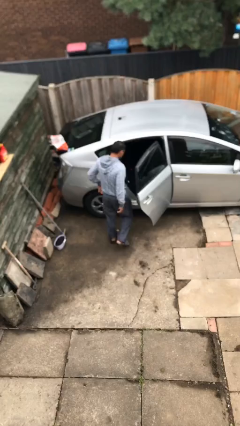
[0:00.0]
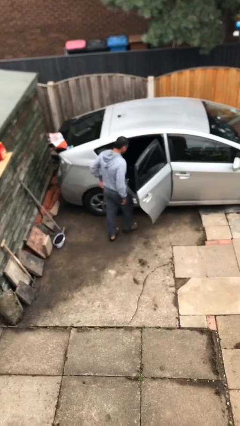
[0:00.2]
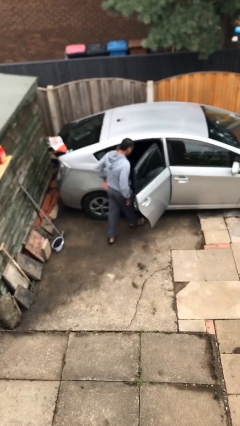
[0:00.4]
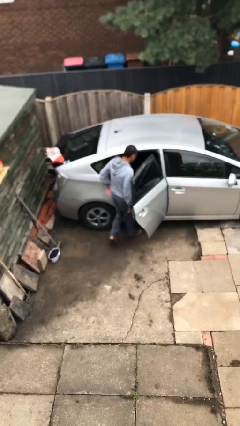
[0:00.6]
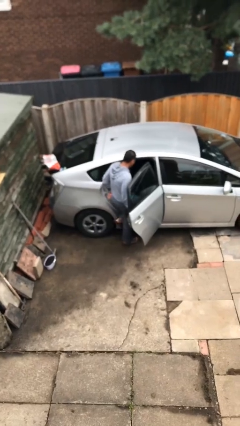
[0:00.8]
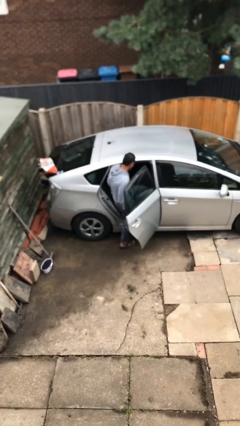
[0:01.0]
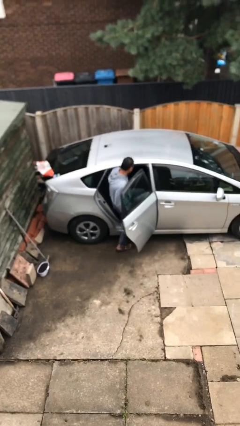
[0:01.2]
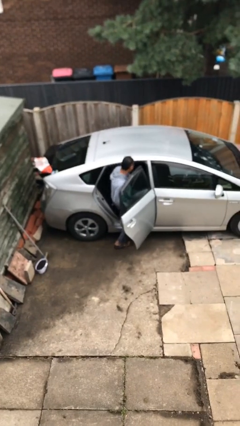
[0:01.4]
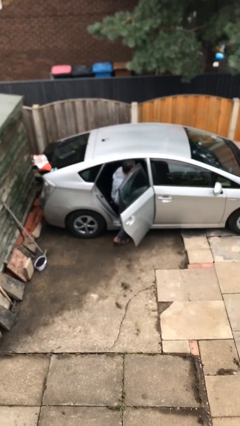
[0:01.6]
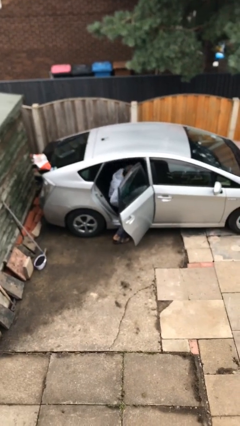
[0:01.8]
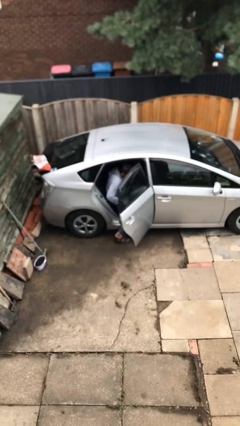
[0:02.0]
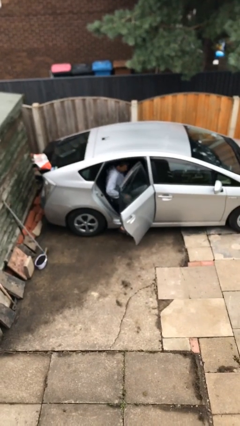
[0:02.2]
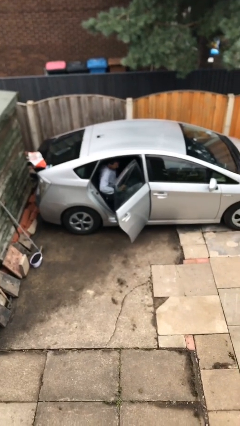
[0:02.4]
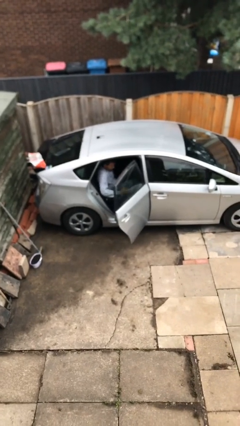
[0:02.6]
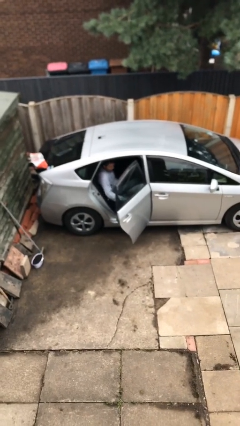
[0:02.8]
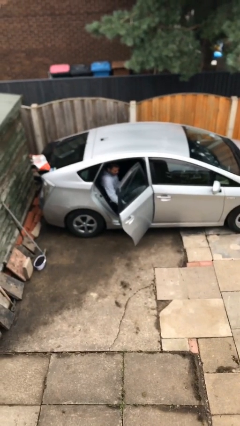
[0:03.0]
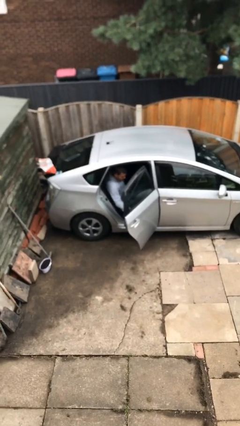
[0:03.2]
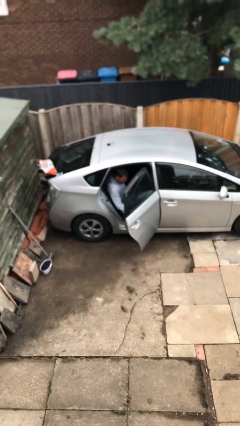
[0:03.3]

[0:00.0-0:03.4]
person enters car

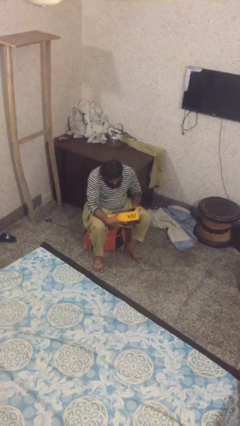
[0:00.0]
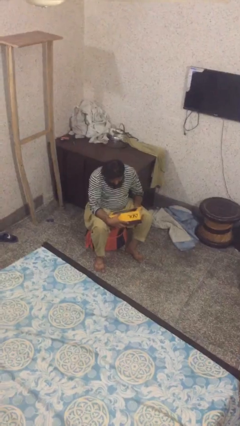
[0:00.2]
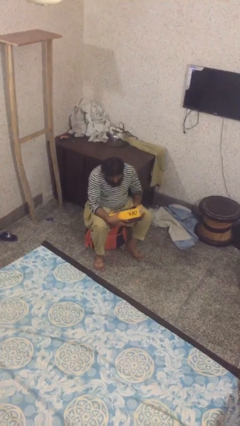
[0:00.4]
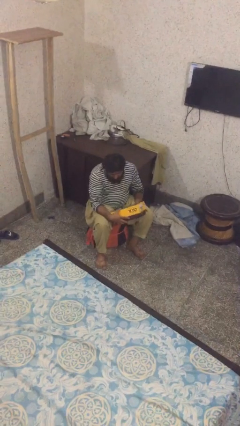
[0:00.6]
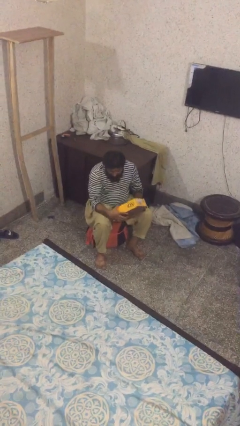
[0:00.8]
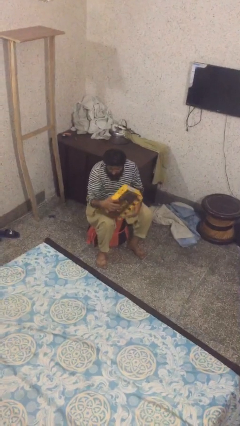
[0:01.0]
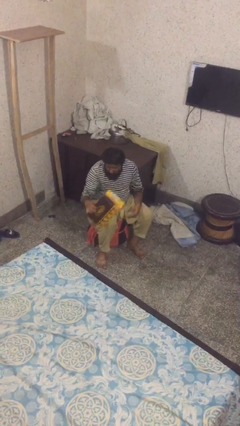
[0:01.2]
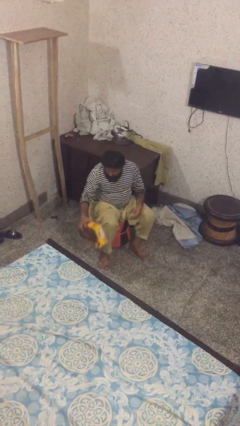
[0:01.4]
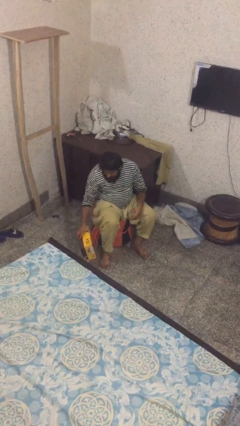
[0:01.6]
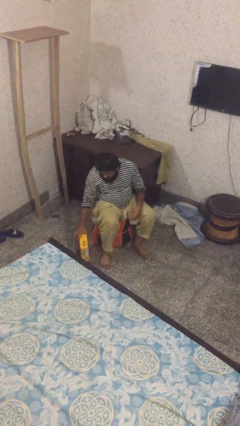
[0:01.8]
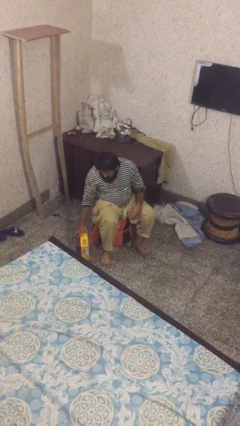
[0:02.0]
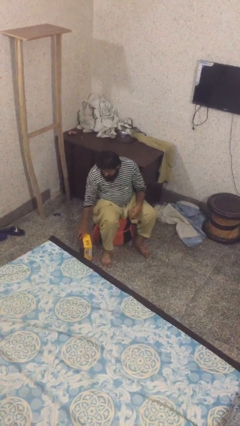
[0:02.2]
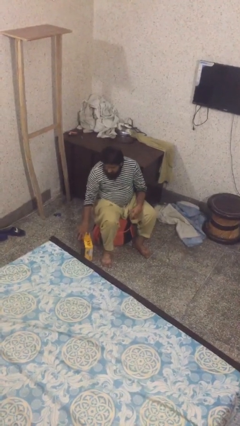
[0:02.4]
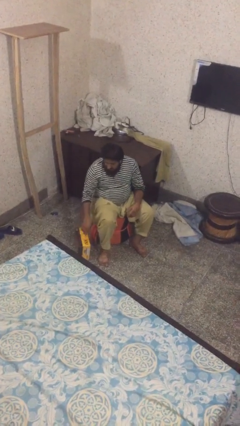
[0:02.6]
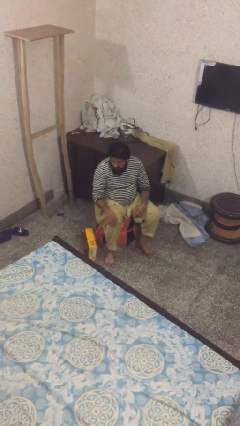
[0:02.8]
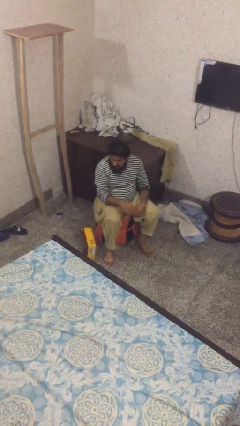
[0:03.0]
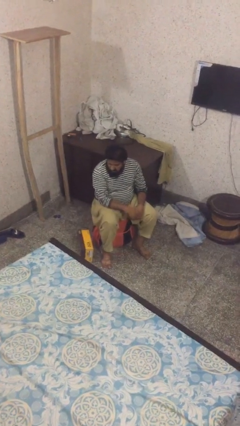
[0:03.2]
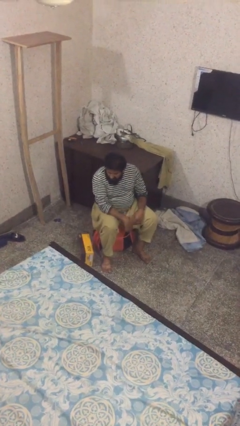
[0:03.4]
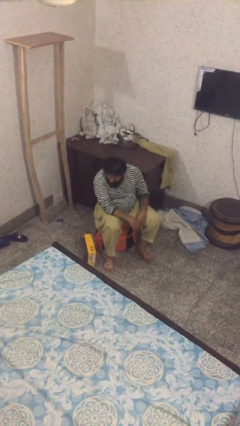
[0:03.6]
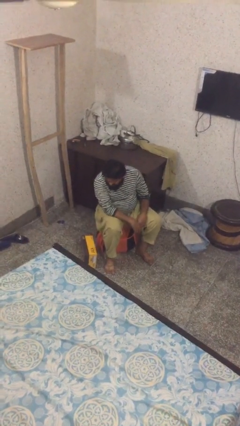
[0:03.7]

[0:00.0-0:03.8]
person puts down object on floor

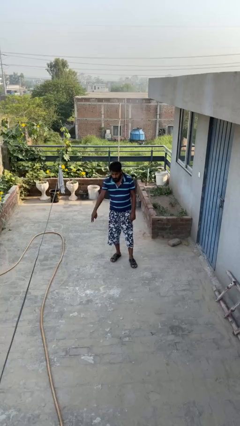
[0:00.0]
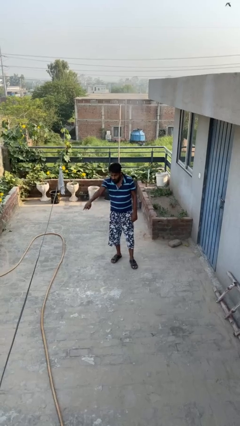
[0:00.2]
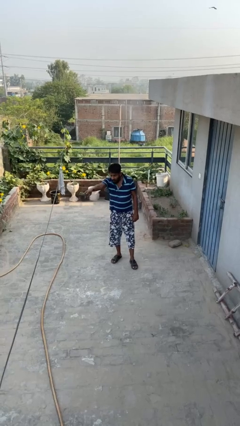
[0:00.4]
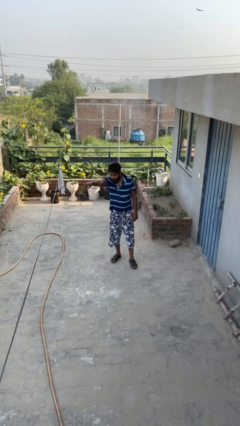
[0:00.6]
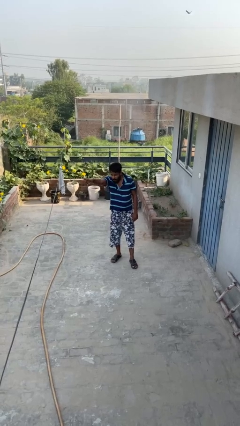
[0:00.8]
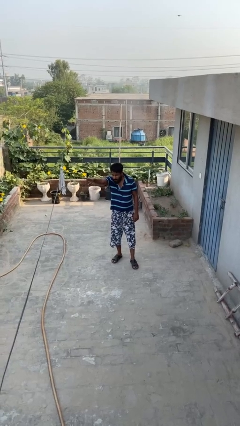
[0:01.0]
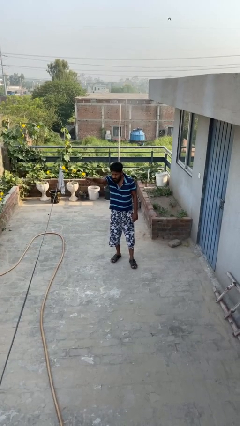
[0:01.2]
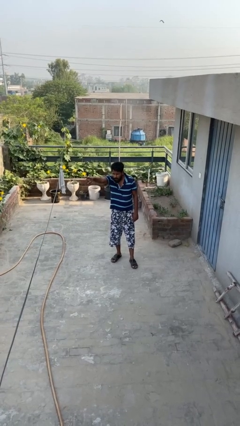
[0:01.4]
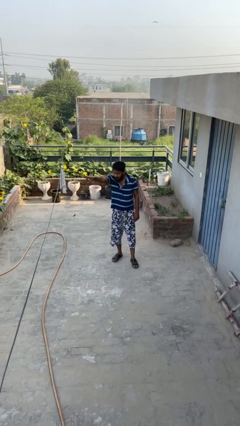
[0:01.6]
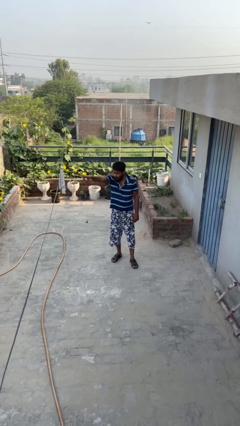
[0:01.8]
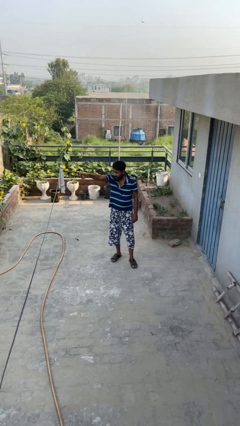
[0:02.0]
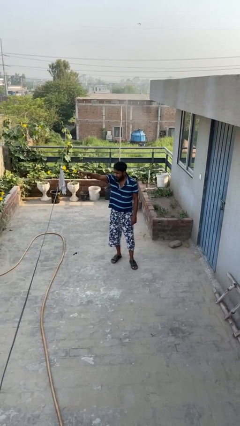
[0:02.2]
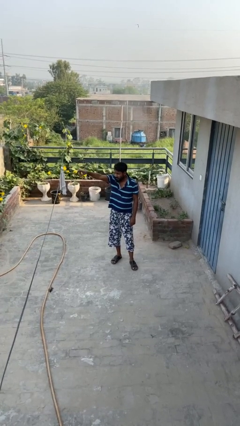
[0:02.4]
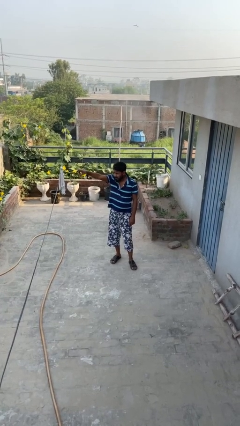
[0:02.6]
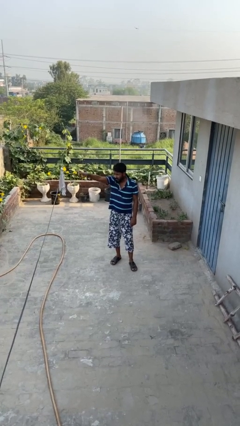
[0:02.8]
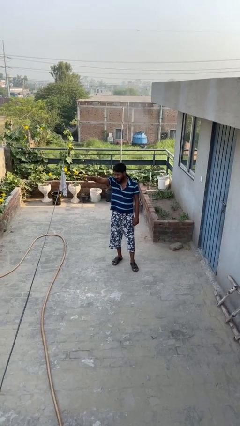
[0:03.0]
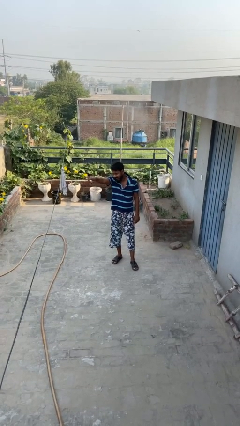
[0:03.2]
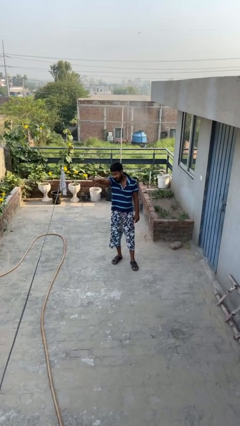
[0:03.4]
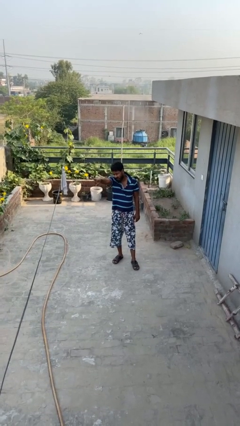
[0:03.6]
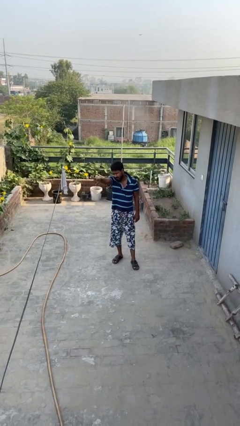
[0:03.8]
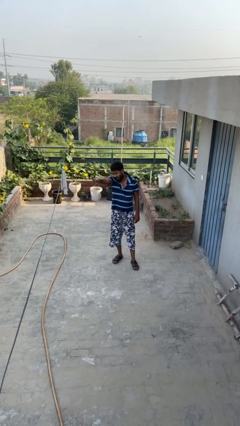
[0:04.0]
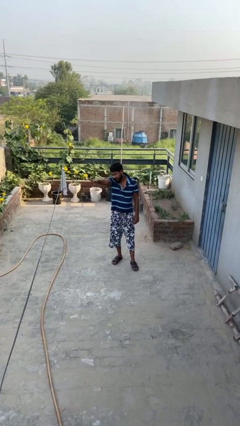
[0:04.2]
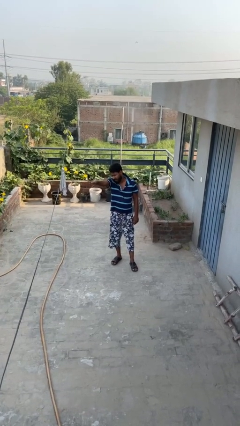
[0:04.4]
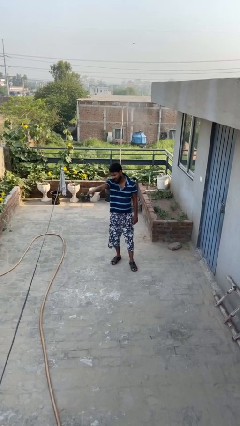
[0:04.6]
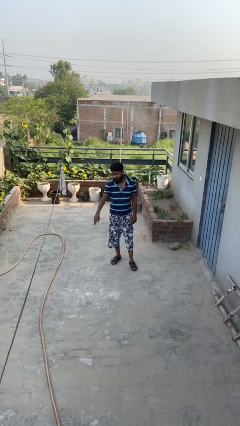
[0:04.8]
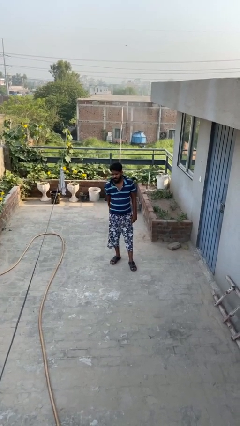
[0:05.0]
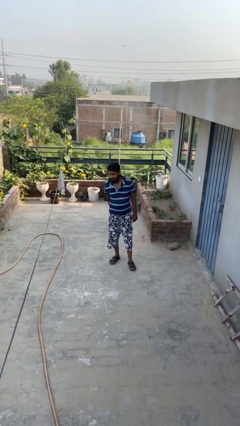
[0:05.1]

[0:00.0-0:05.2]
person gestures peace

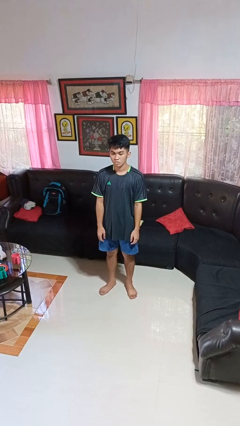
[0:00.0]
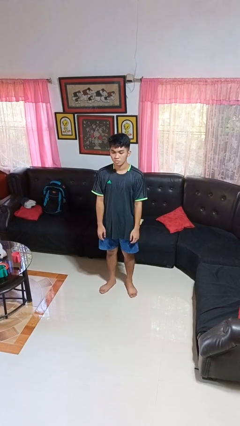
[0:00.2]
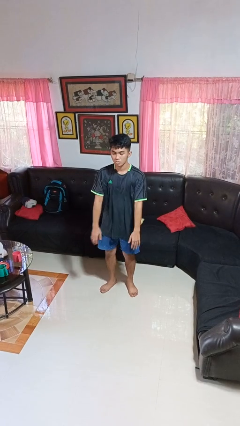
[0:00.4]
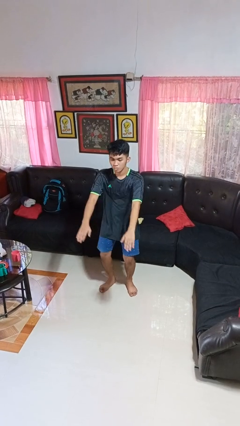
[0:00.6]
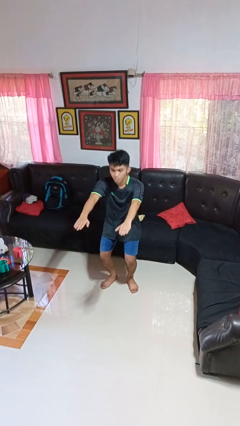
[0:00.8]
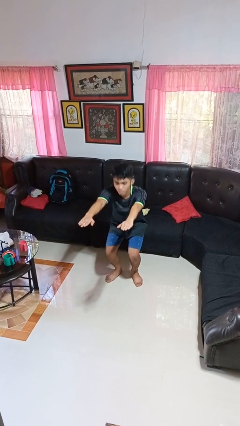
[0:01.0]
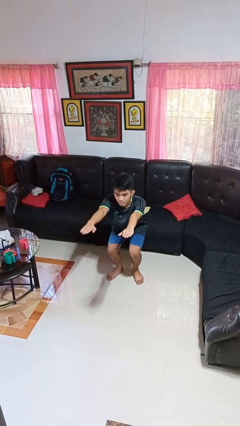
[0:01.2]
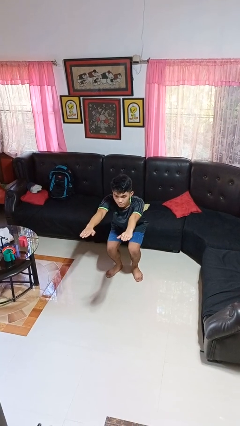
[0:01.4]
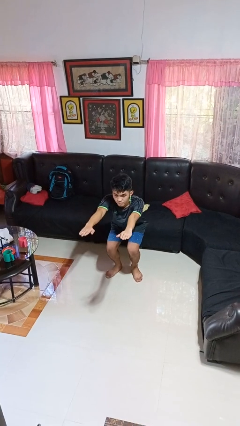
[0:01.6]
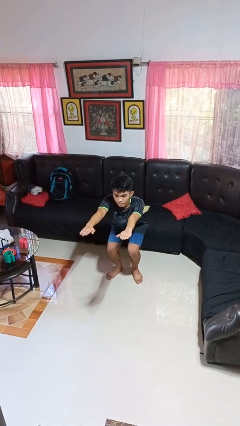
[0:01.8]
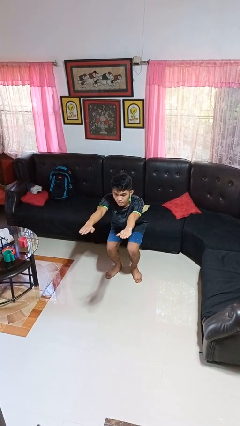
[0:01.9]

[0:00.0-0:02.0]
person squats

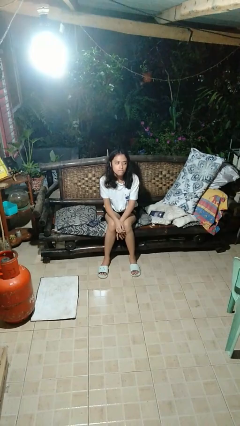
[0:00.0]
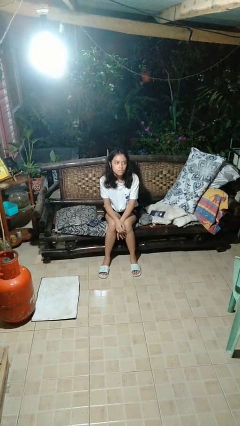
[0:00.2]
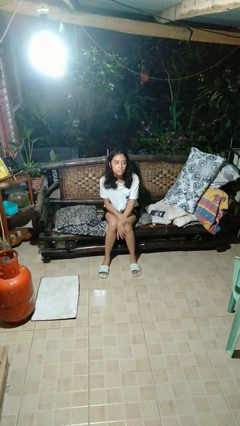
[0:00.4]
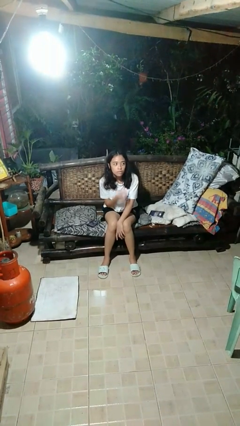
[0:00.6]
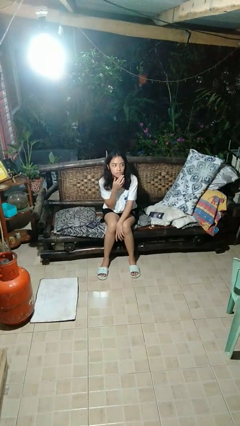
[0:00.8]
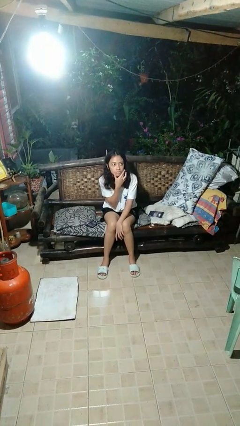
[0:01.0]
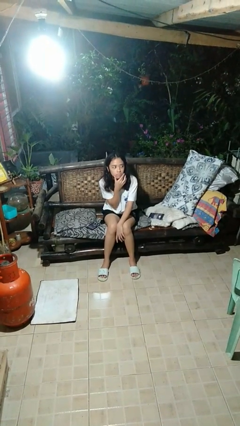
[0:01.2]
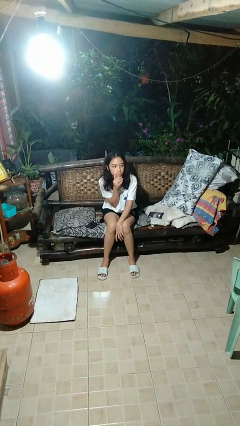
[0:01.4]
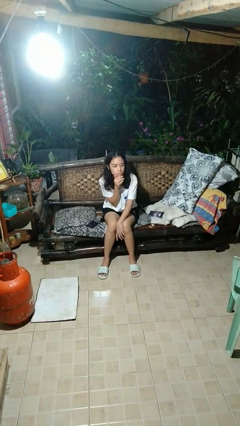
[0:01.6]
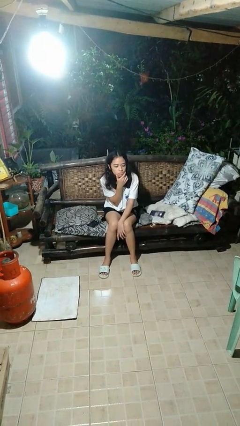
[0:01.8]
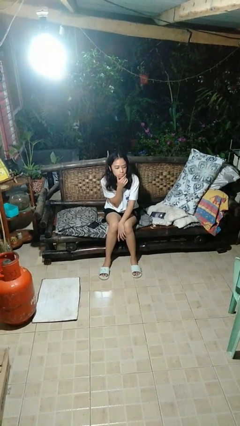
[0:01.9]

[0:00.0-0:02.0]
person strokes chin

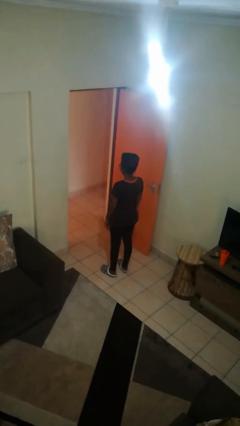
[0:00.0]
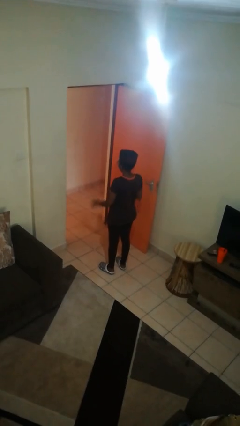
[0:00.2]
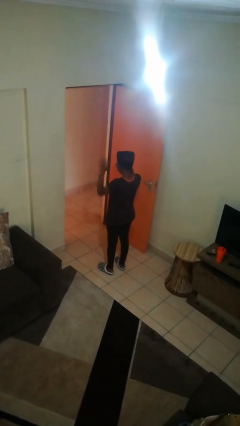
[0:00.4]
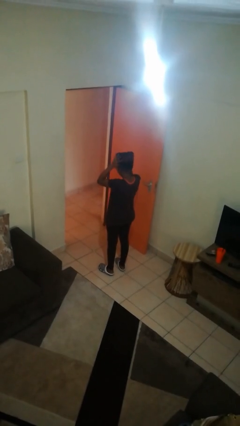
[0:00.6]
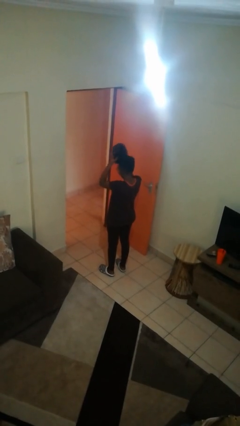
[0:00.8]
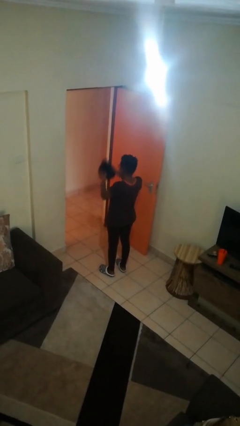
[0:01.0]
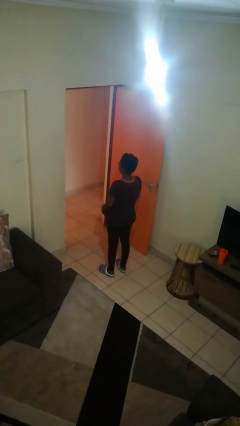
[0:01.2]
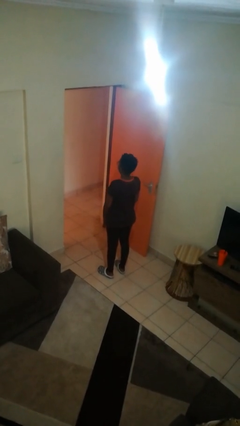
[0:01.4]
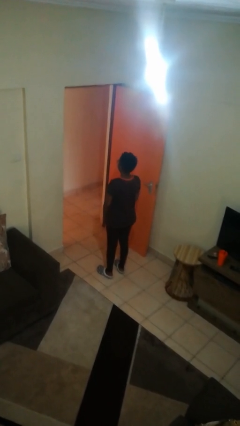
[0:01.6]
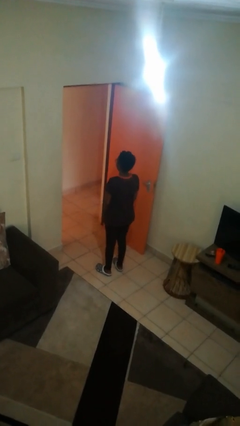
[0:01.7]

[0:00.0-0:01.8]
person takes off hat
